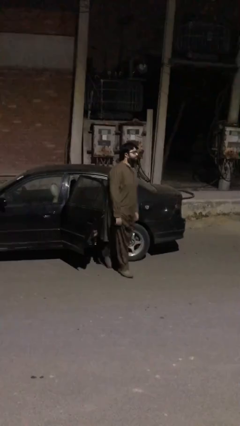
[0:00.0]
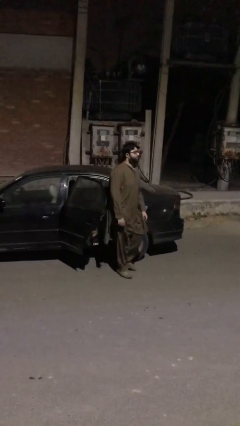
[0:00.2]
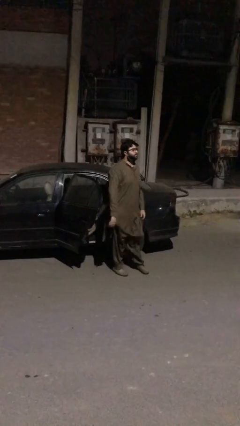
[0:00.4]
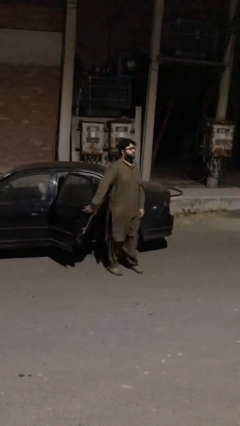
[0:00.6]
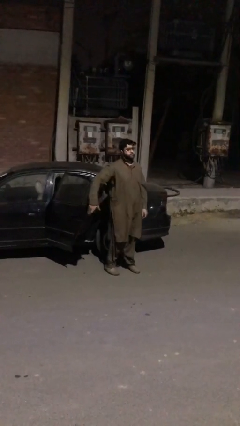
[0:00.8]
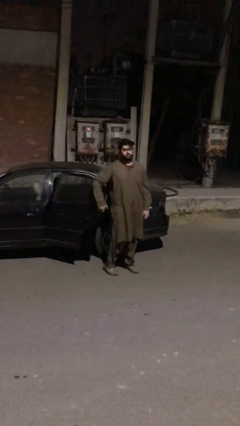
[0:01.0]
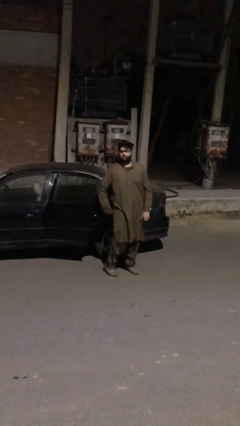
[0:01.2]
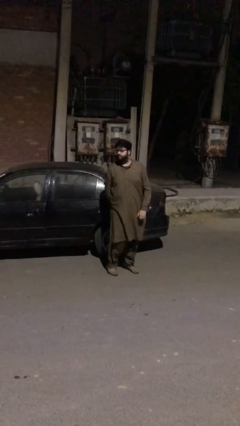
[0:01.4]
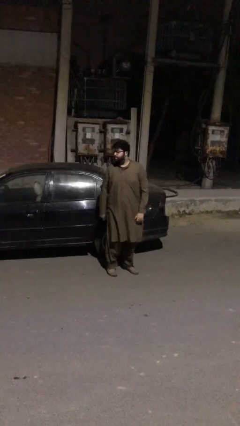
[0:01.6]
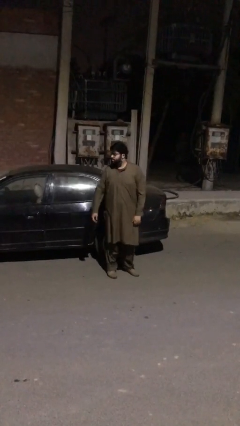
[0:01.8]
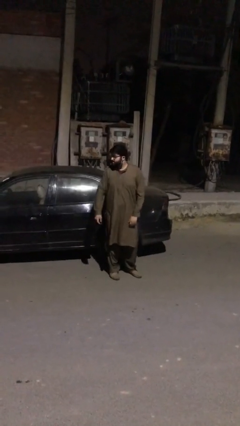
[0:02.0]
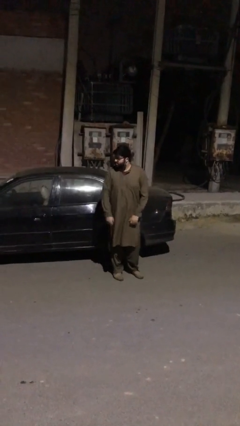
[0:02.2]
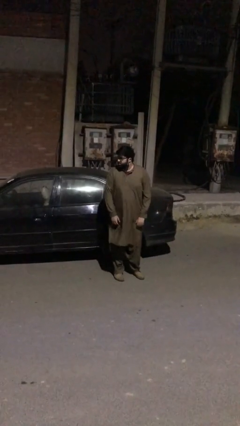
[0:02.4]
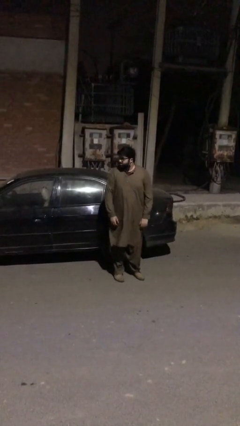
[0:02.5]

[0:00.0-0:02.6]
person closes car door

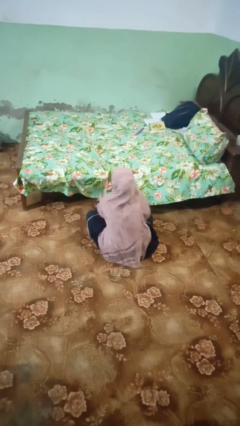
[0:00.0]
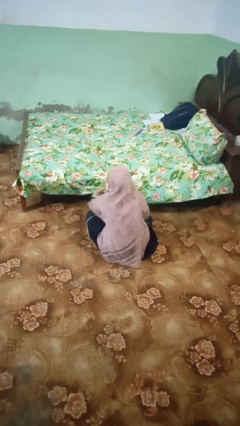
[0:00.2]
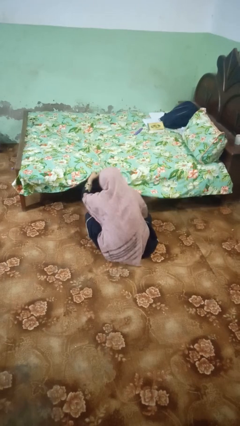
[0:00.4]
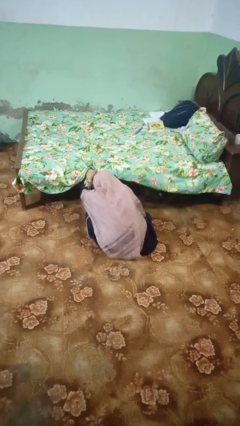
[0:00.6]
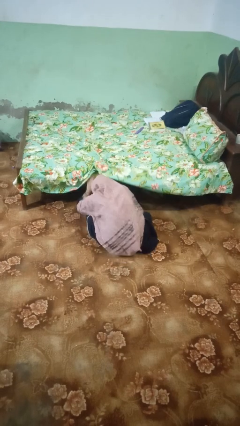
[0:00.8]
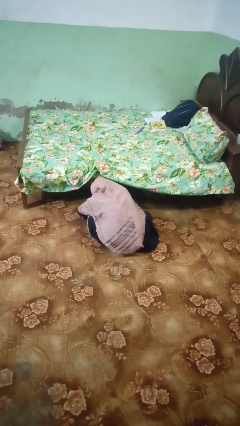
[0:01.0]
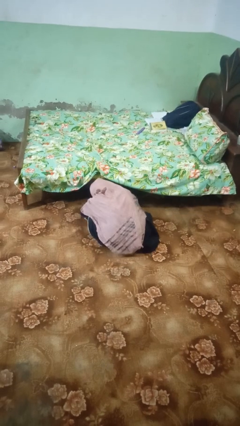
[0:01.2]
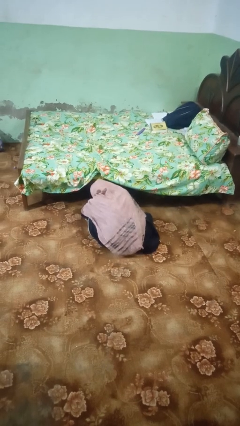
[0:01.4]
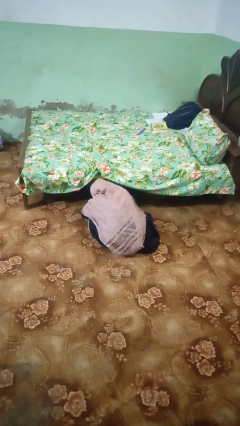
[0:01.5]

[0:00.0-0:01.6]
person searches under bed

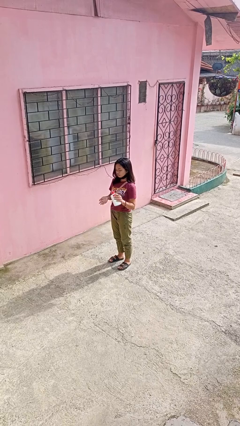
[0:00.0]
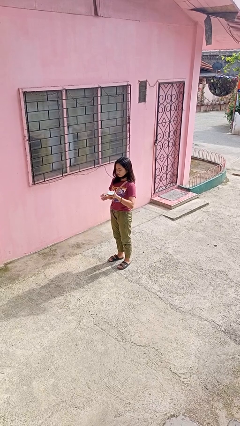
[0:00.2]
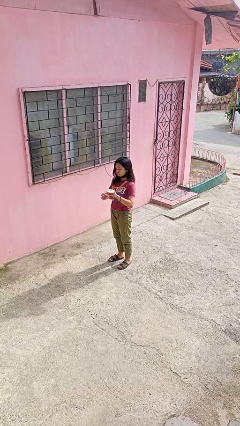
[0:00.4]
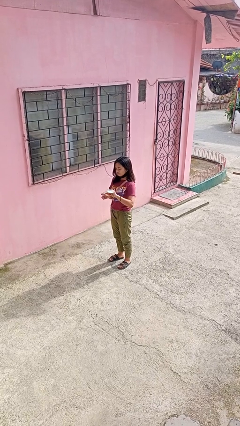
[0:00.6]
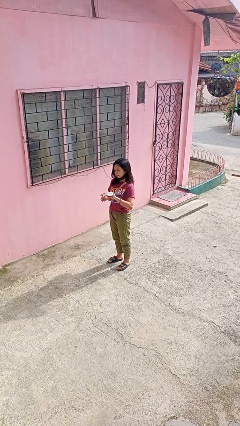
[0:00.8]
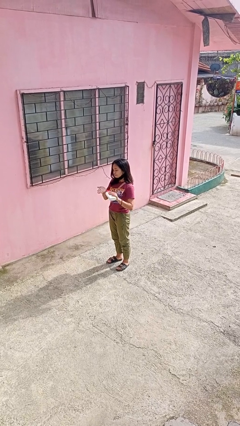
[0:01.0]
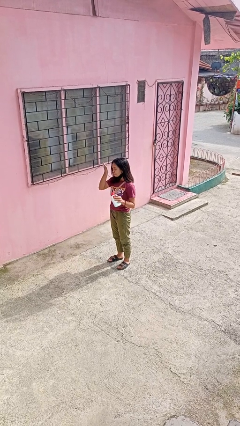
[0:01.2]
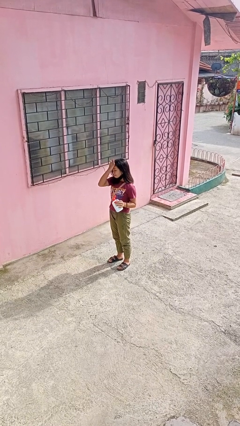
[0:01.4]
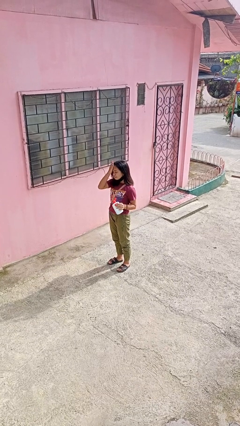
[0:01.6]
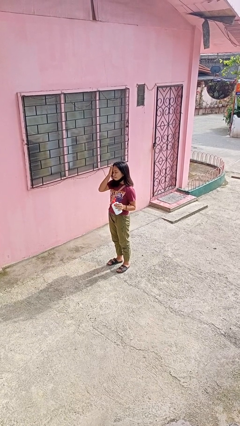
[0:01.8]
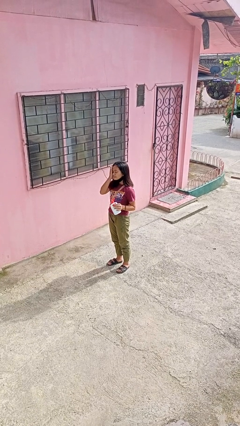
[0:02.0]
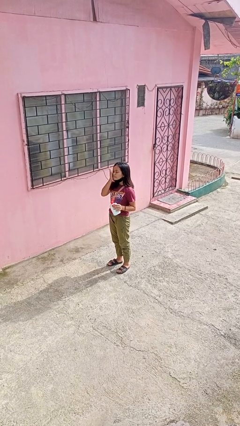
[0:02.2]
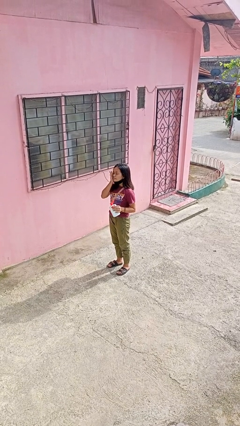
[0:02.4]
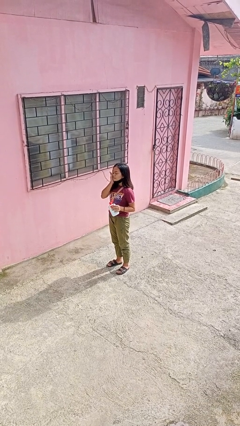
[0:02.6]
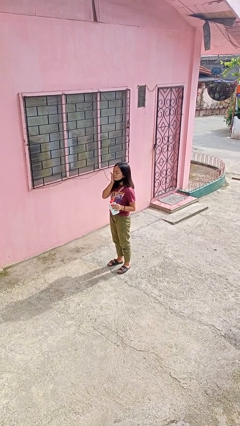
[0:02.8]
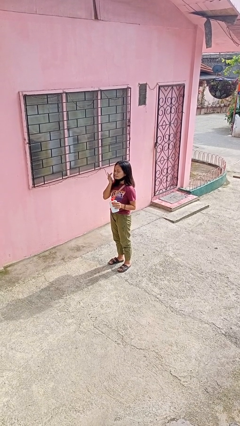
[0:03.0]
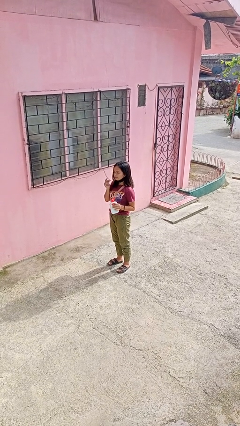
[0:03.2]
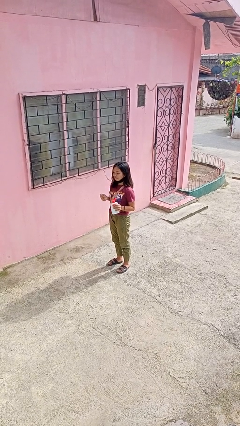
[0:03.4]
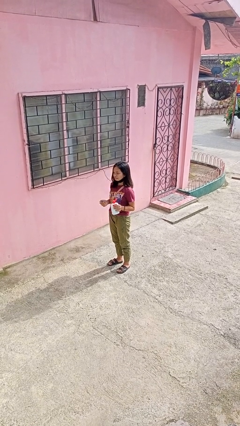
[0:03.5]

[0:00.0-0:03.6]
person applies facial moisturizer

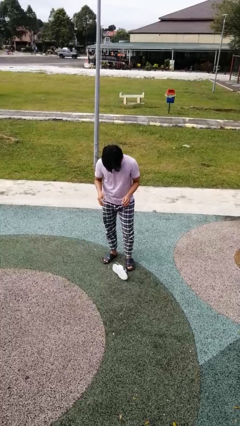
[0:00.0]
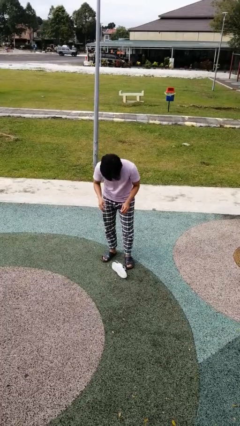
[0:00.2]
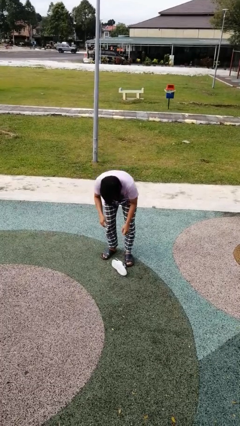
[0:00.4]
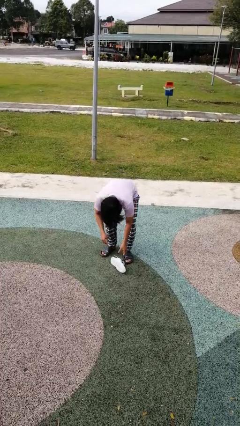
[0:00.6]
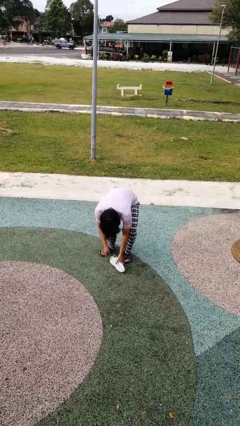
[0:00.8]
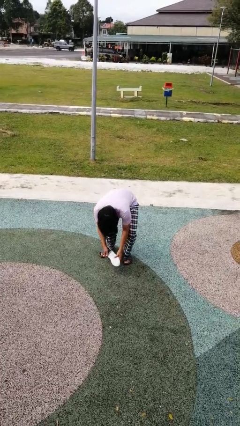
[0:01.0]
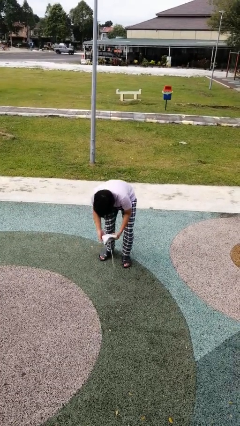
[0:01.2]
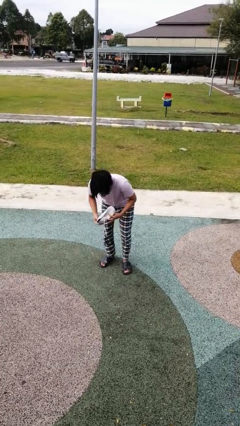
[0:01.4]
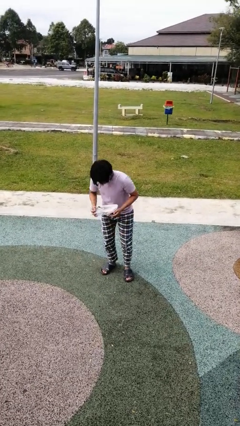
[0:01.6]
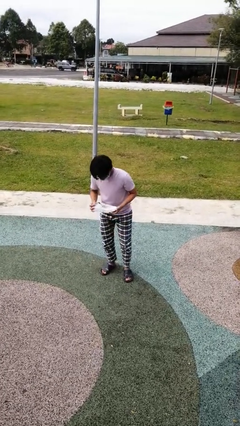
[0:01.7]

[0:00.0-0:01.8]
person picks up object from floor

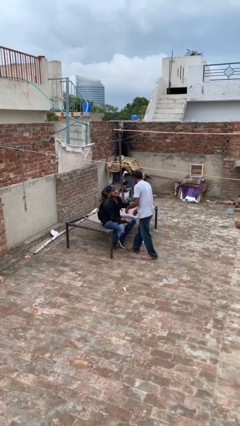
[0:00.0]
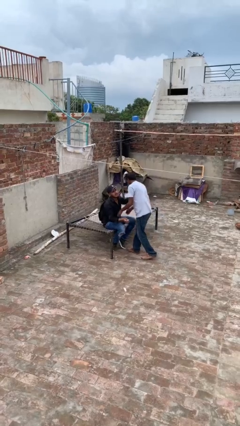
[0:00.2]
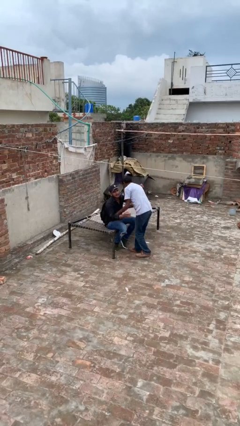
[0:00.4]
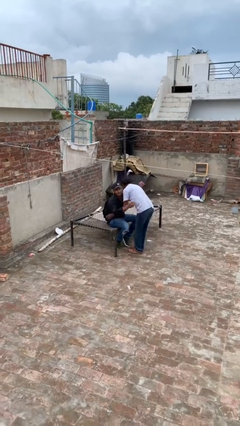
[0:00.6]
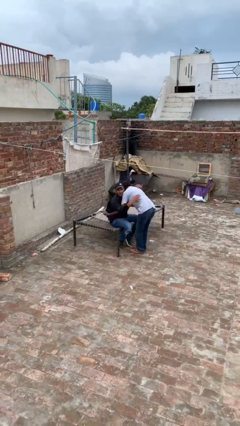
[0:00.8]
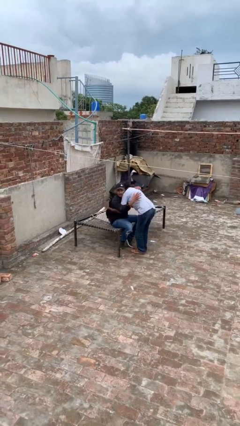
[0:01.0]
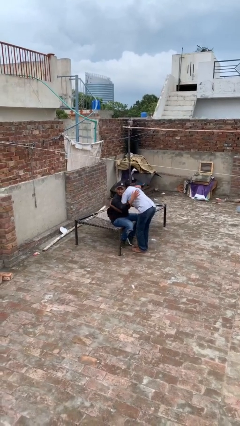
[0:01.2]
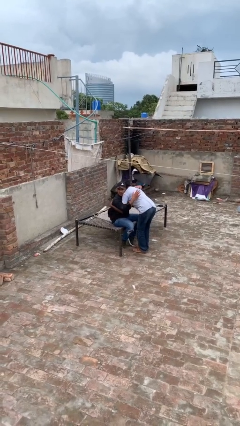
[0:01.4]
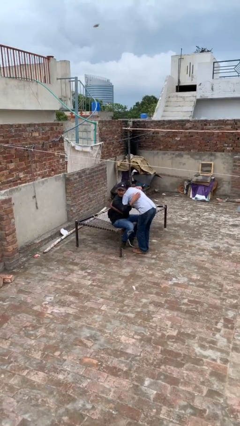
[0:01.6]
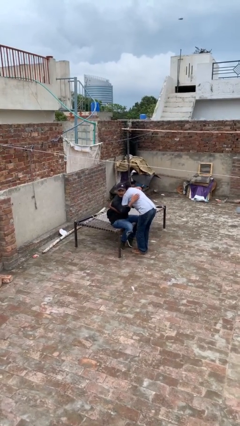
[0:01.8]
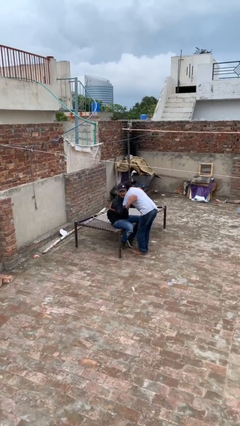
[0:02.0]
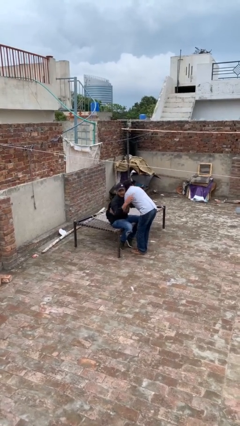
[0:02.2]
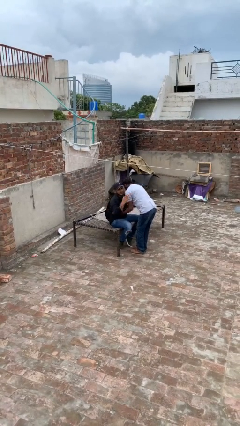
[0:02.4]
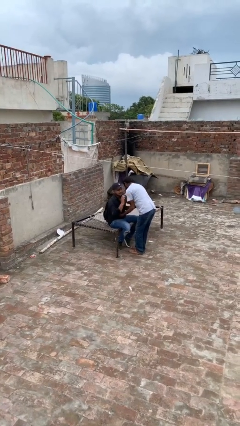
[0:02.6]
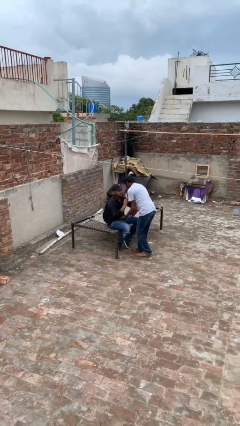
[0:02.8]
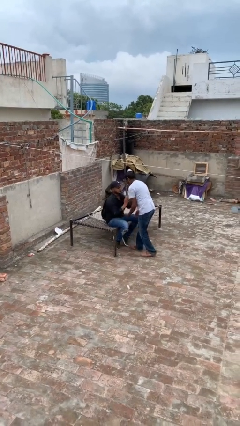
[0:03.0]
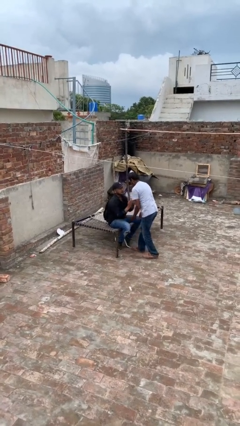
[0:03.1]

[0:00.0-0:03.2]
person embraces person

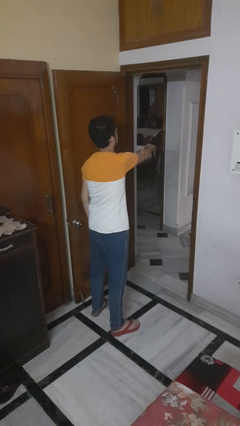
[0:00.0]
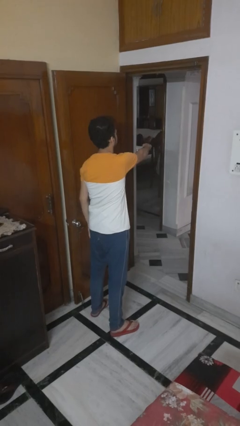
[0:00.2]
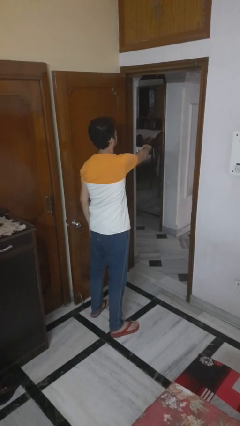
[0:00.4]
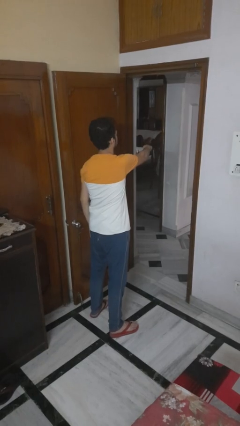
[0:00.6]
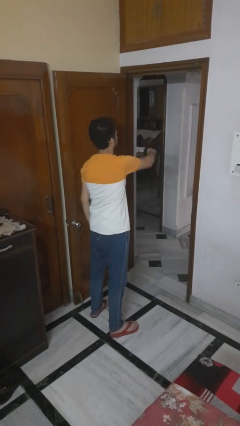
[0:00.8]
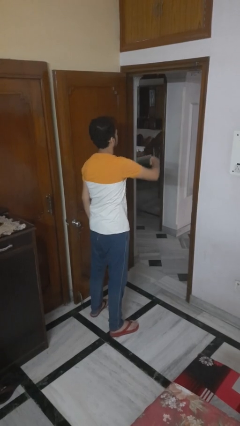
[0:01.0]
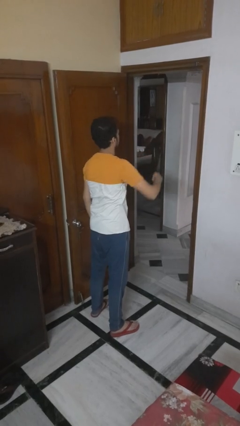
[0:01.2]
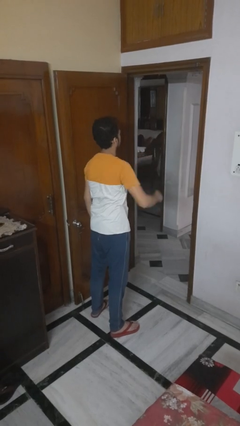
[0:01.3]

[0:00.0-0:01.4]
person punches

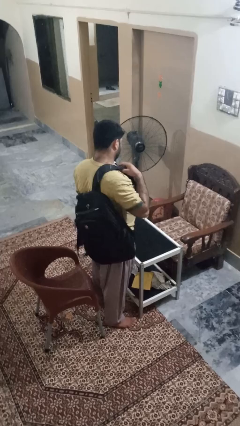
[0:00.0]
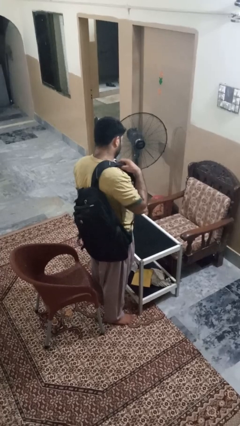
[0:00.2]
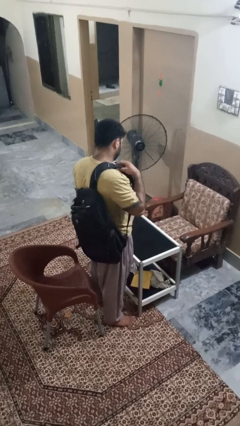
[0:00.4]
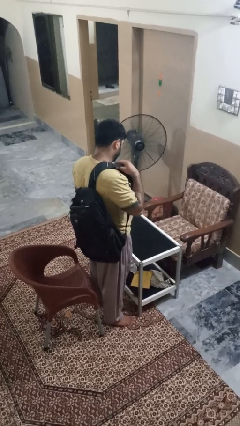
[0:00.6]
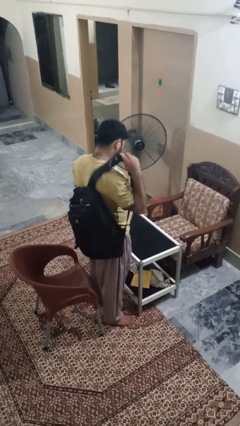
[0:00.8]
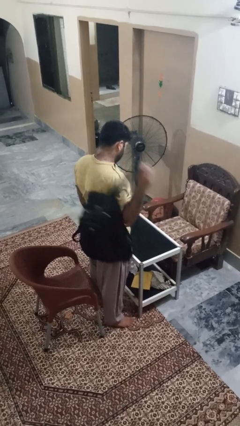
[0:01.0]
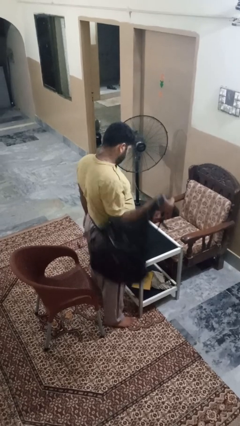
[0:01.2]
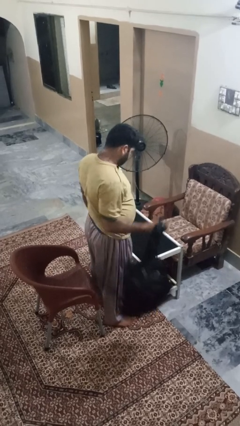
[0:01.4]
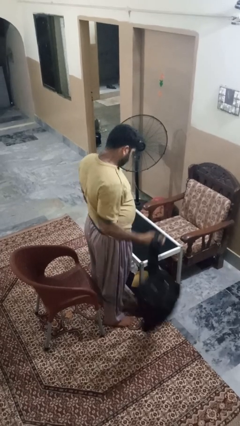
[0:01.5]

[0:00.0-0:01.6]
person takes off backpack

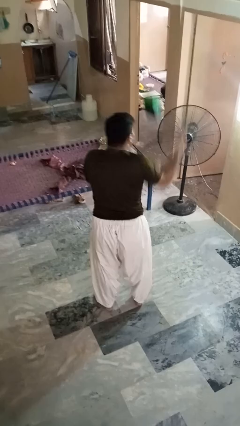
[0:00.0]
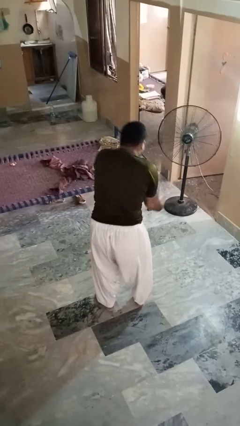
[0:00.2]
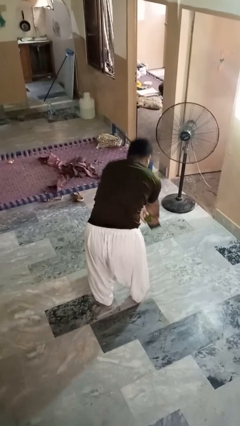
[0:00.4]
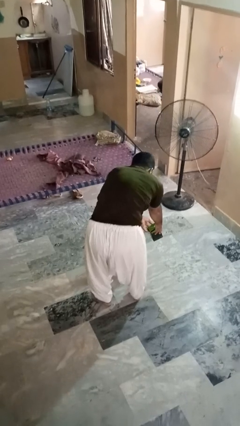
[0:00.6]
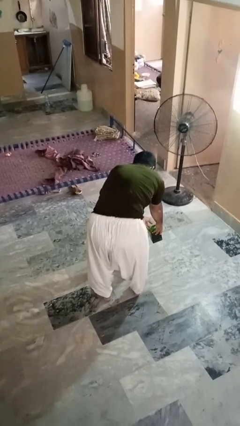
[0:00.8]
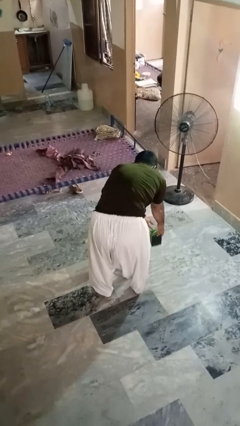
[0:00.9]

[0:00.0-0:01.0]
person catches dropped object
